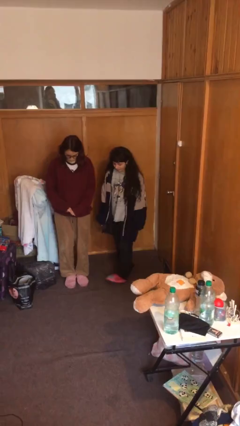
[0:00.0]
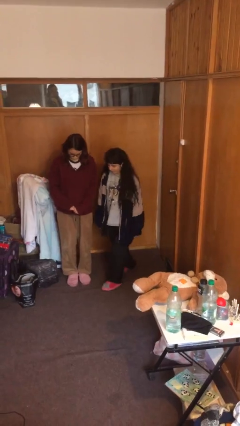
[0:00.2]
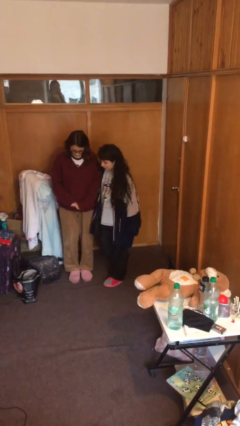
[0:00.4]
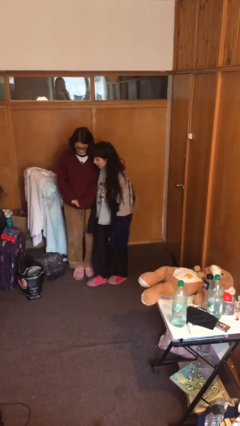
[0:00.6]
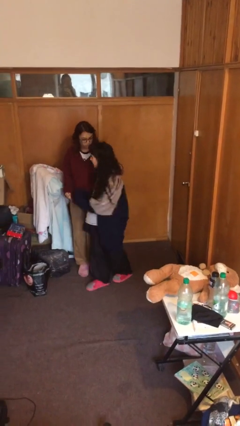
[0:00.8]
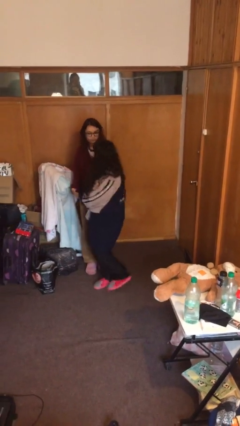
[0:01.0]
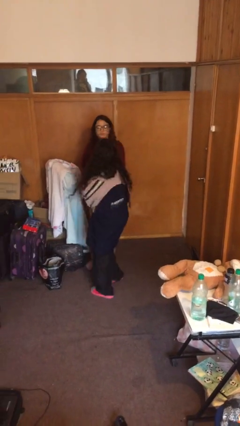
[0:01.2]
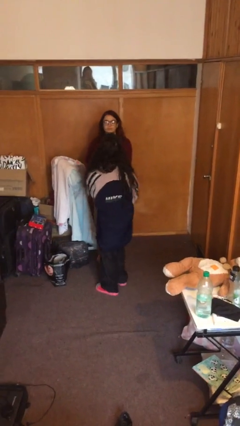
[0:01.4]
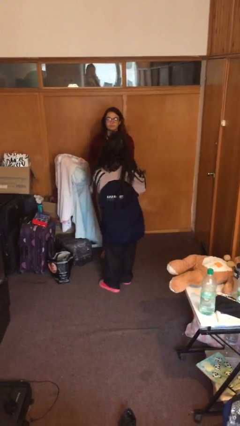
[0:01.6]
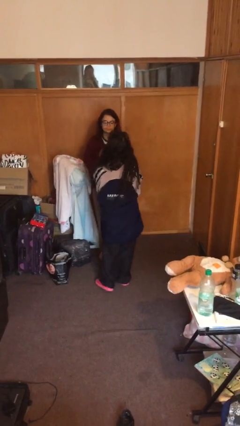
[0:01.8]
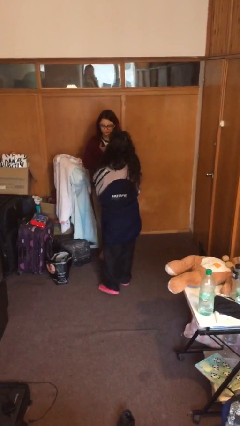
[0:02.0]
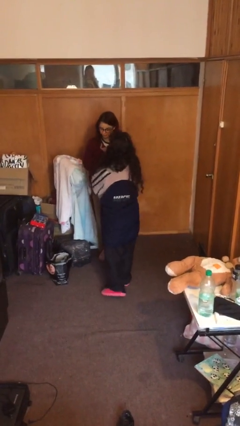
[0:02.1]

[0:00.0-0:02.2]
person bumps into person

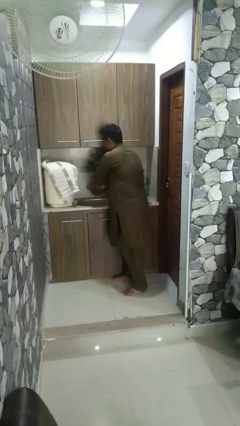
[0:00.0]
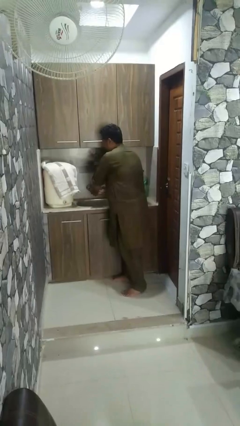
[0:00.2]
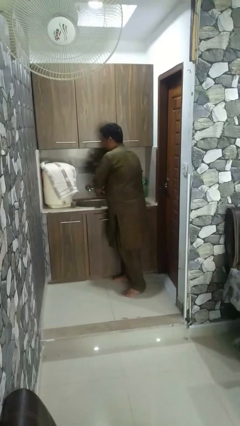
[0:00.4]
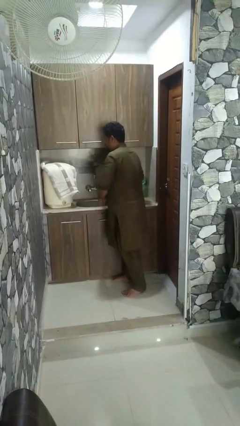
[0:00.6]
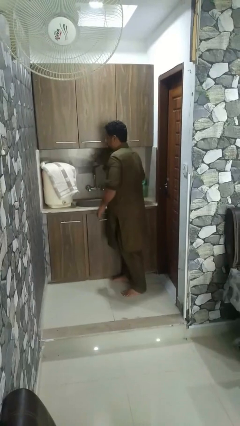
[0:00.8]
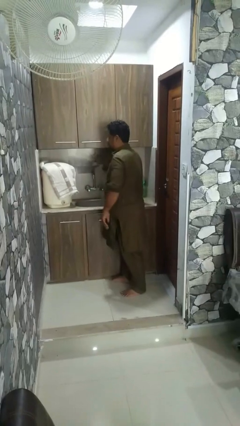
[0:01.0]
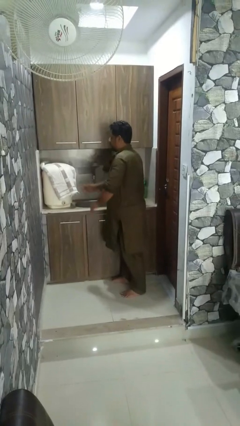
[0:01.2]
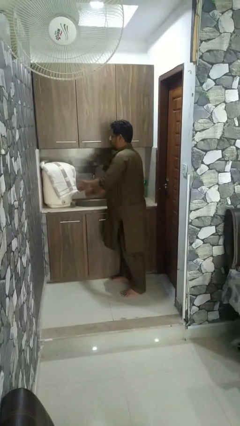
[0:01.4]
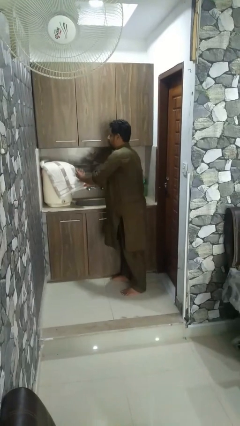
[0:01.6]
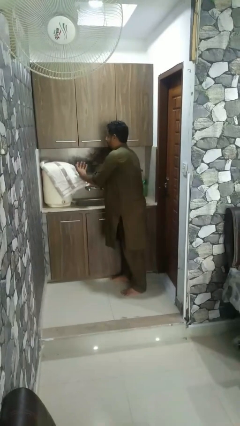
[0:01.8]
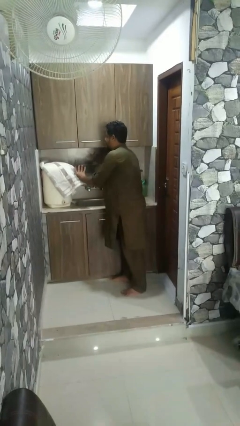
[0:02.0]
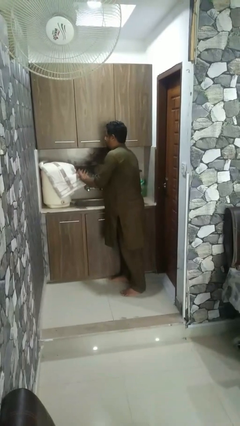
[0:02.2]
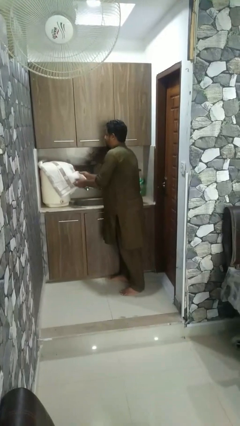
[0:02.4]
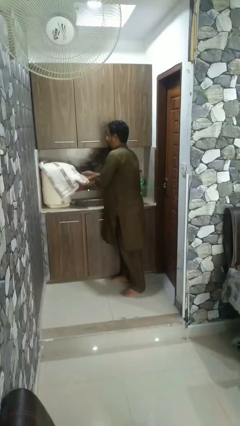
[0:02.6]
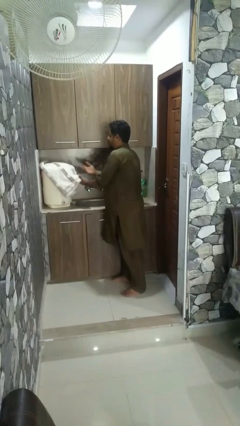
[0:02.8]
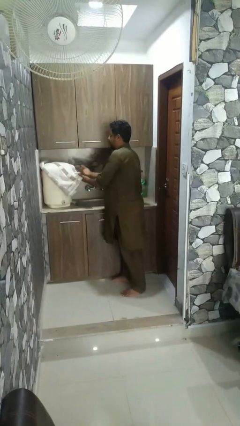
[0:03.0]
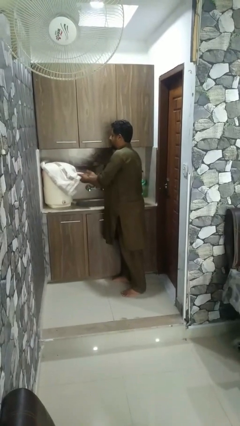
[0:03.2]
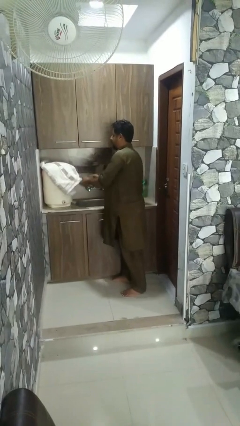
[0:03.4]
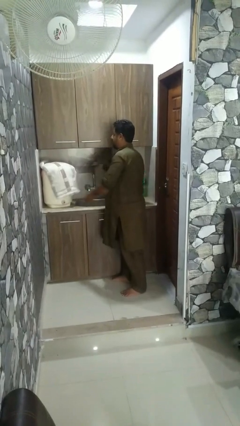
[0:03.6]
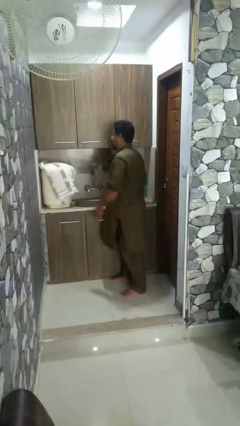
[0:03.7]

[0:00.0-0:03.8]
person dries hands with towel

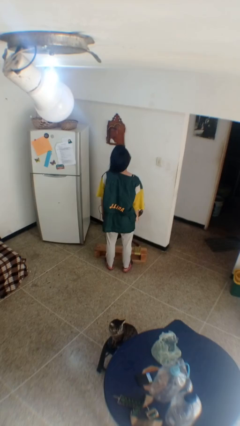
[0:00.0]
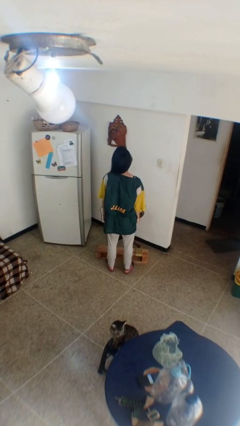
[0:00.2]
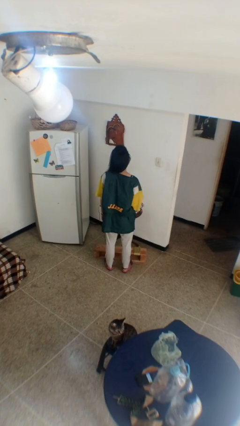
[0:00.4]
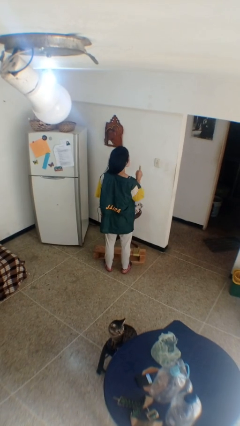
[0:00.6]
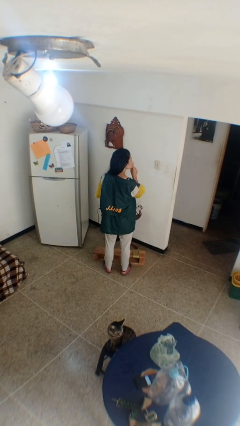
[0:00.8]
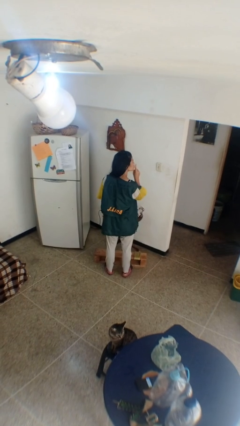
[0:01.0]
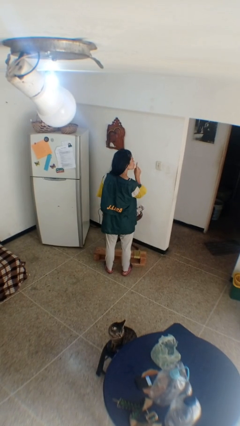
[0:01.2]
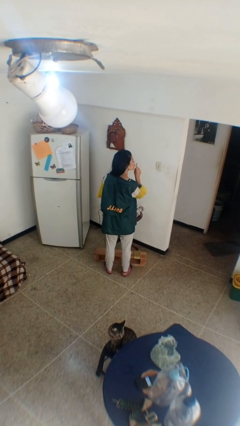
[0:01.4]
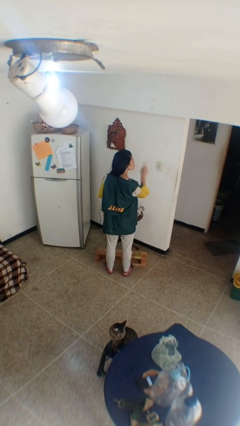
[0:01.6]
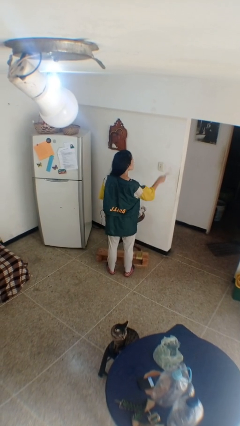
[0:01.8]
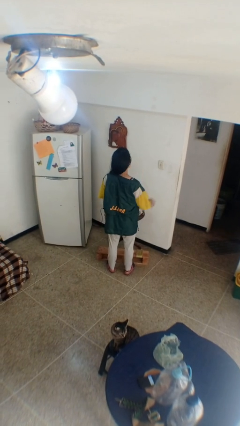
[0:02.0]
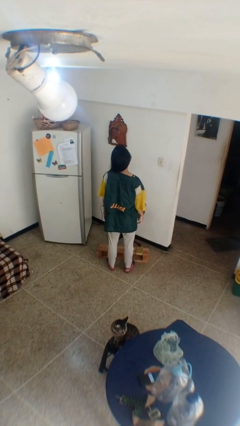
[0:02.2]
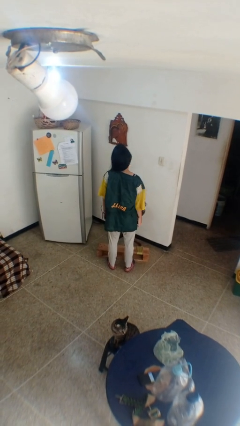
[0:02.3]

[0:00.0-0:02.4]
person gestures be quiet

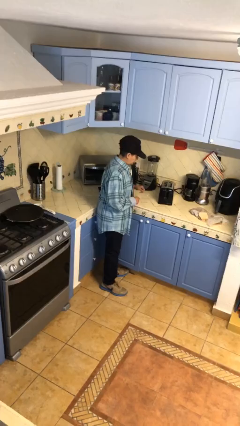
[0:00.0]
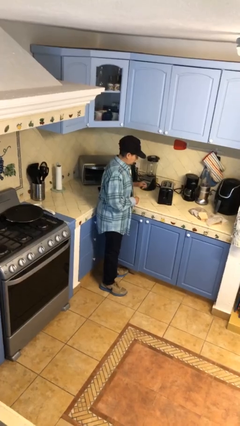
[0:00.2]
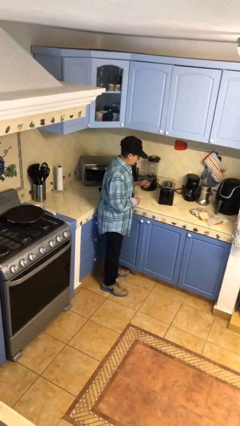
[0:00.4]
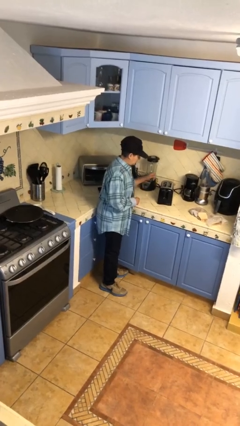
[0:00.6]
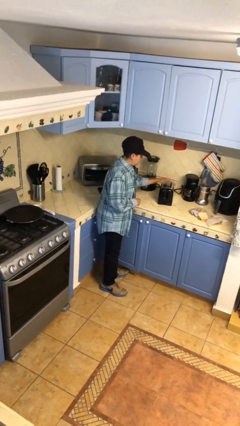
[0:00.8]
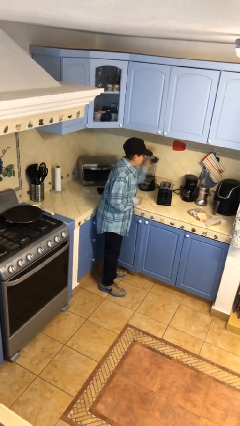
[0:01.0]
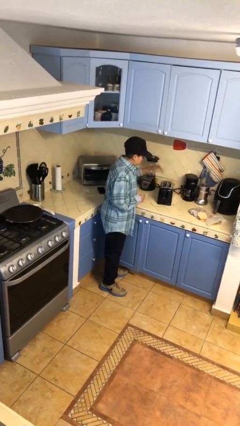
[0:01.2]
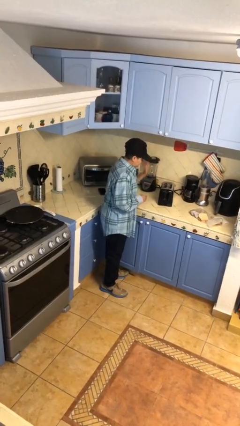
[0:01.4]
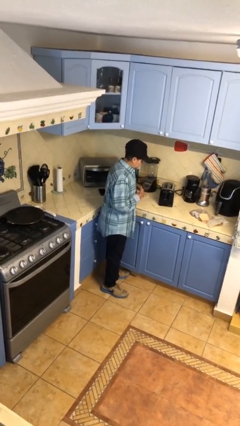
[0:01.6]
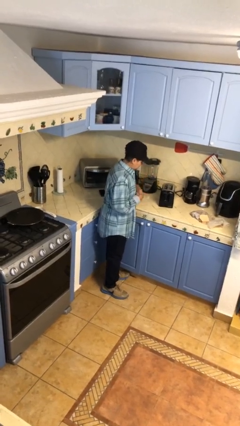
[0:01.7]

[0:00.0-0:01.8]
person burns hand

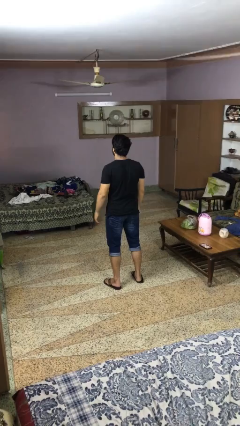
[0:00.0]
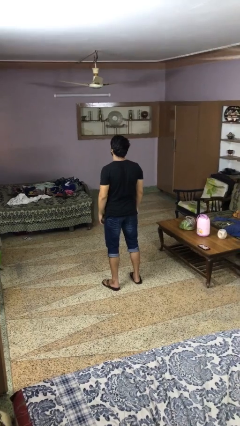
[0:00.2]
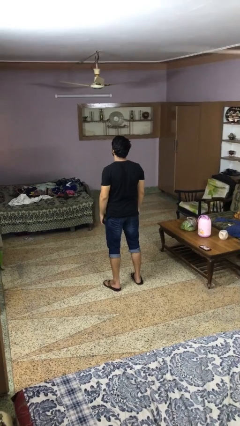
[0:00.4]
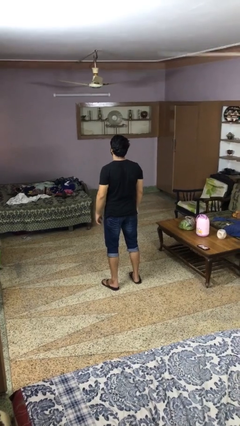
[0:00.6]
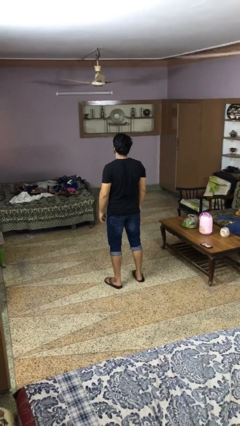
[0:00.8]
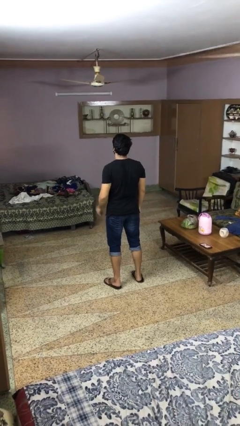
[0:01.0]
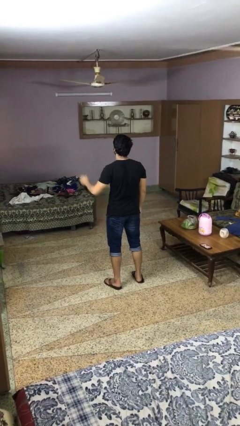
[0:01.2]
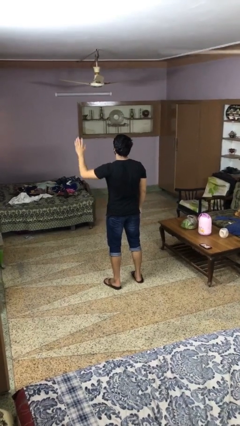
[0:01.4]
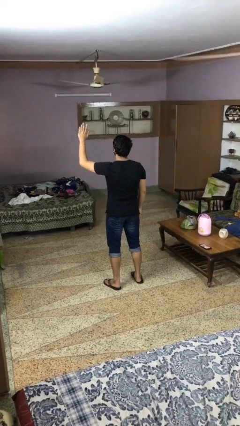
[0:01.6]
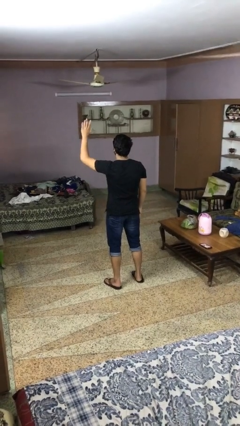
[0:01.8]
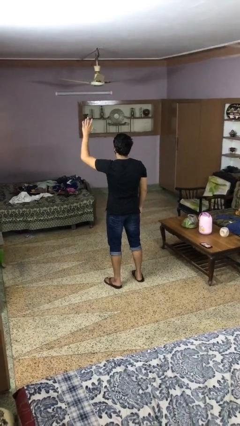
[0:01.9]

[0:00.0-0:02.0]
person gestures raise hand

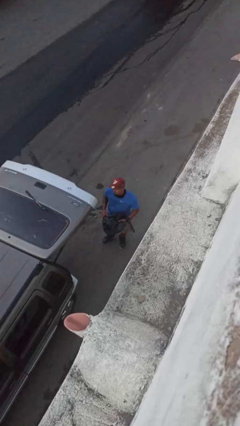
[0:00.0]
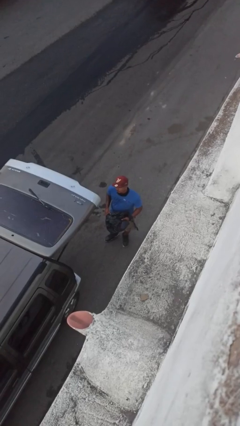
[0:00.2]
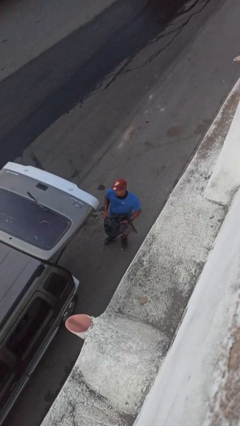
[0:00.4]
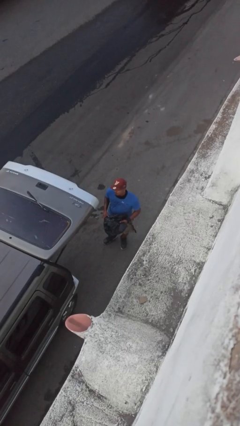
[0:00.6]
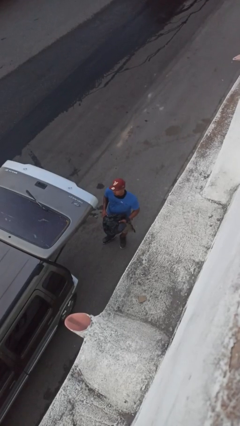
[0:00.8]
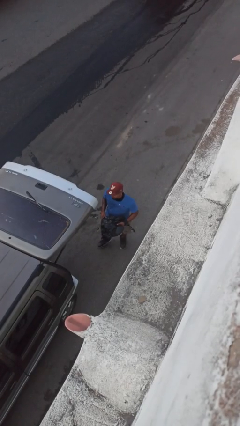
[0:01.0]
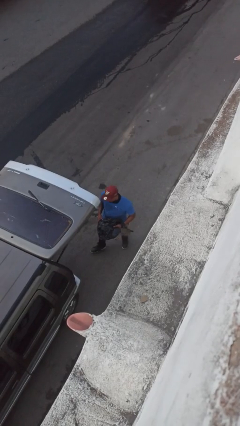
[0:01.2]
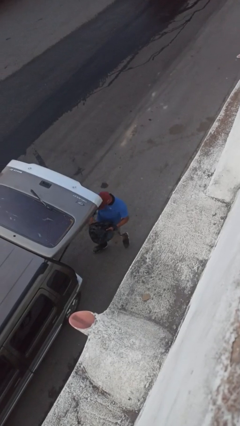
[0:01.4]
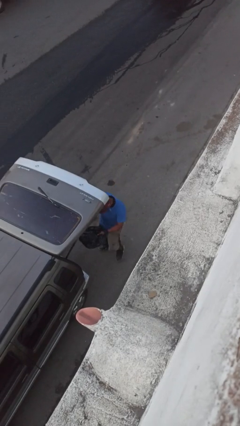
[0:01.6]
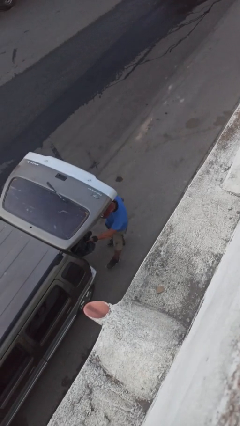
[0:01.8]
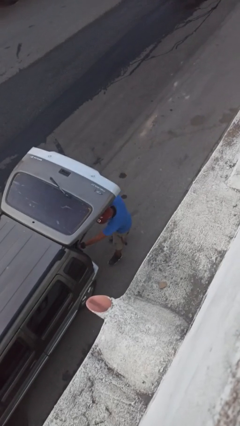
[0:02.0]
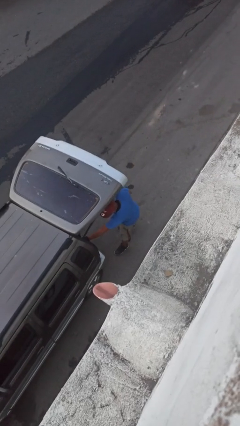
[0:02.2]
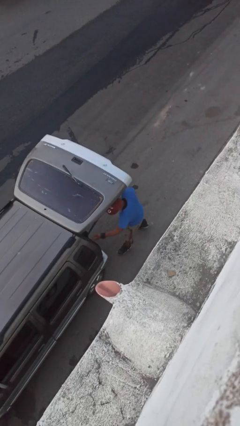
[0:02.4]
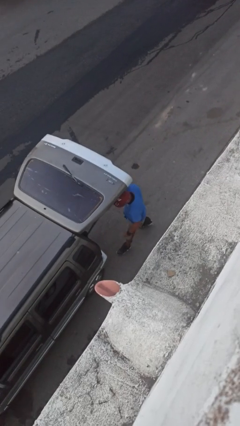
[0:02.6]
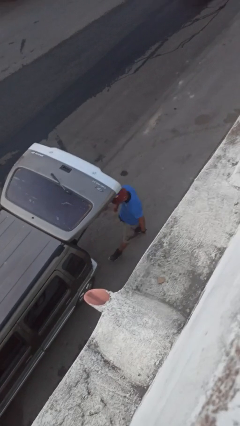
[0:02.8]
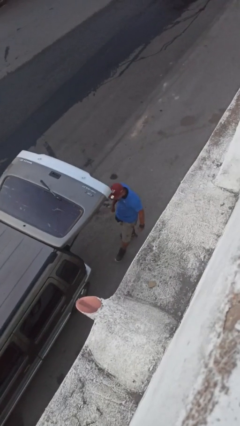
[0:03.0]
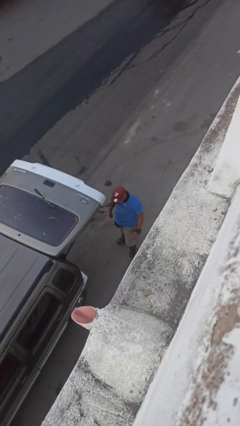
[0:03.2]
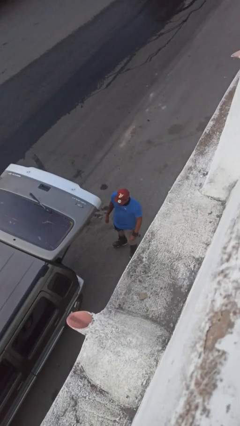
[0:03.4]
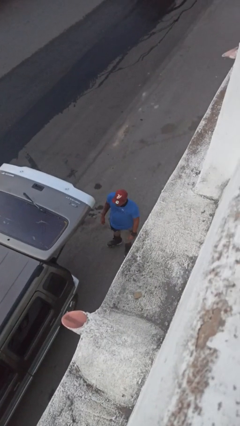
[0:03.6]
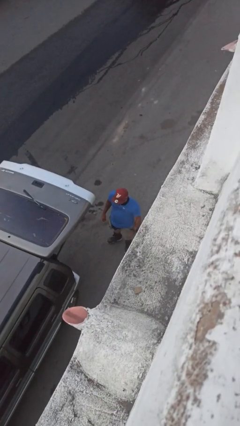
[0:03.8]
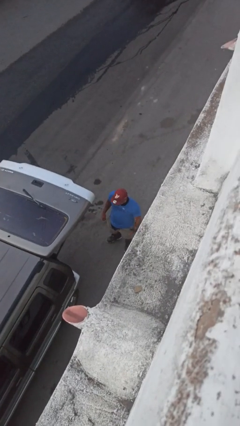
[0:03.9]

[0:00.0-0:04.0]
person loads car

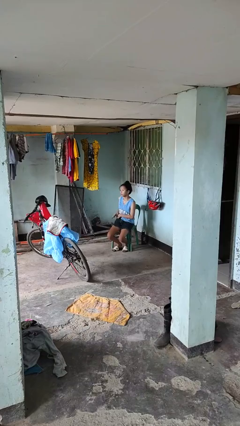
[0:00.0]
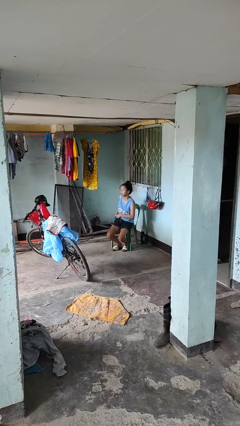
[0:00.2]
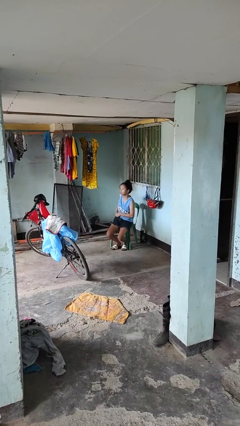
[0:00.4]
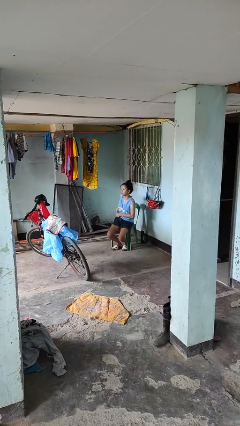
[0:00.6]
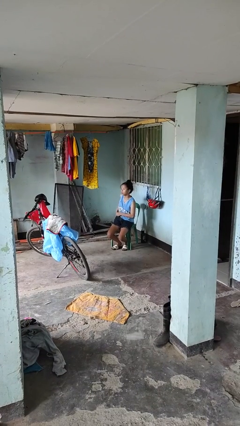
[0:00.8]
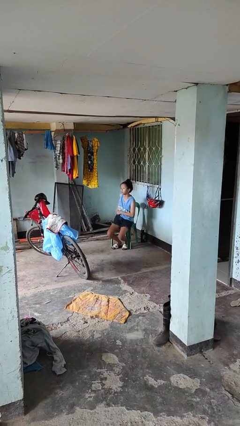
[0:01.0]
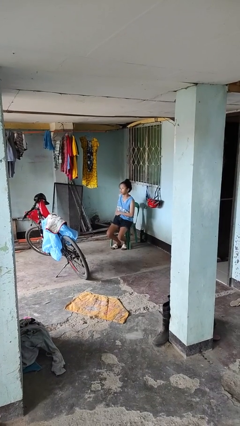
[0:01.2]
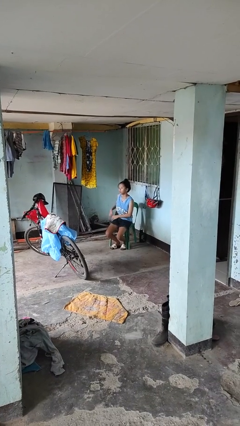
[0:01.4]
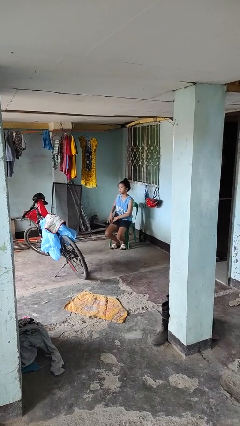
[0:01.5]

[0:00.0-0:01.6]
person puts phone into pocket
